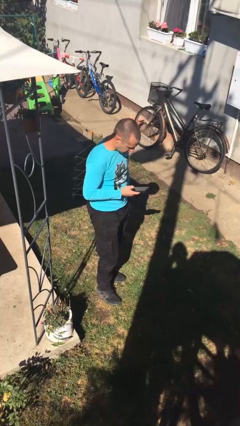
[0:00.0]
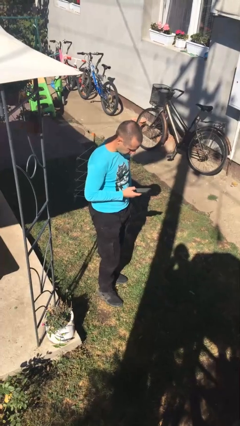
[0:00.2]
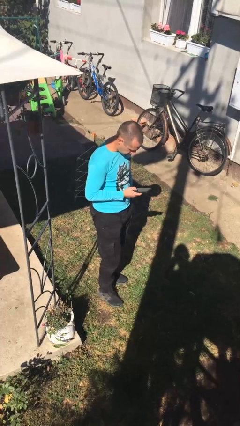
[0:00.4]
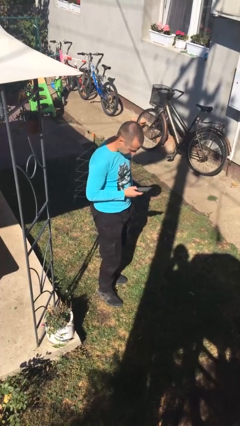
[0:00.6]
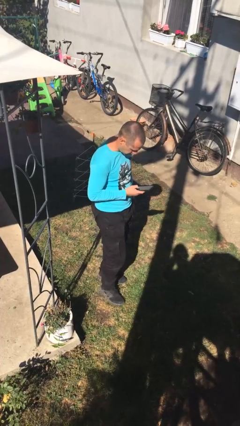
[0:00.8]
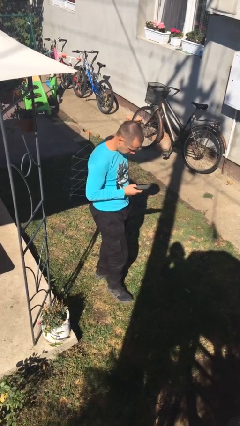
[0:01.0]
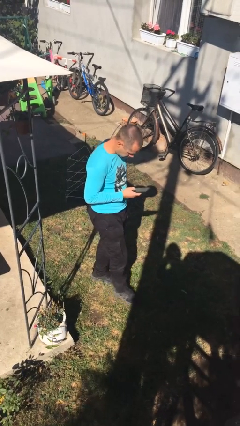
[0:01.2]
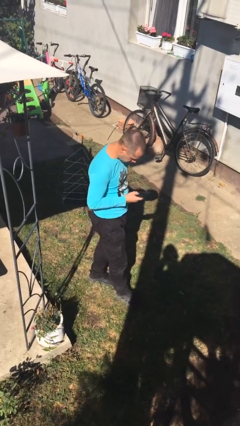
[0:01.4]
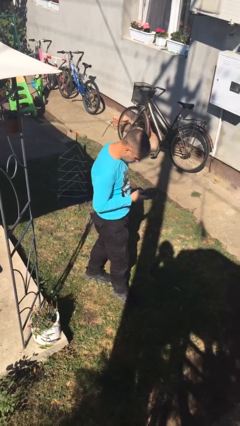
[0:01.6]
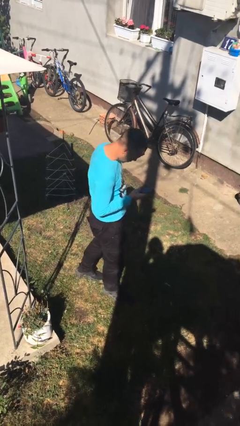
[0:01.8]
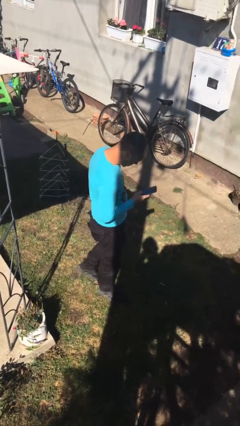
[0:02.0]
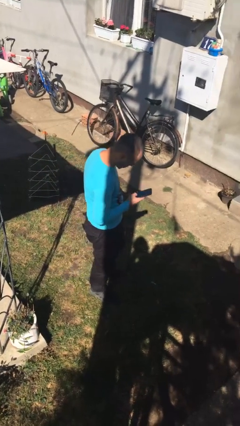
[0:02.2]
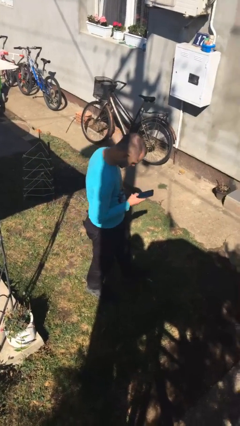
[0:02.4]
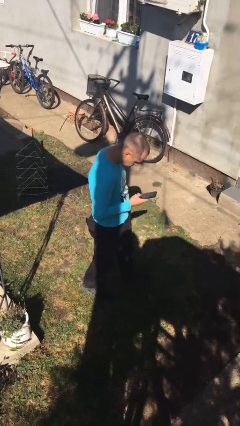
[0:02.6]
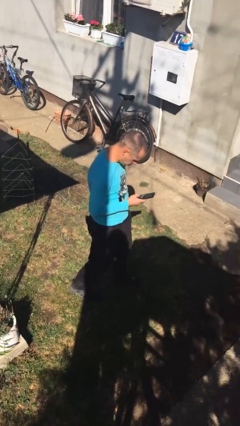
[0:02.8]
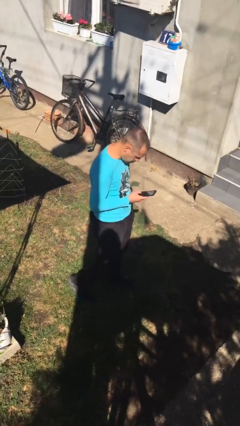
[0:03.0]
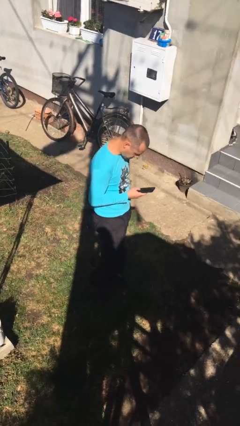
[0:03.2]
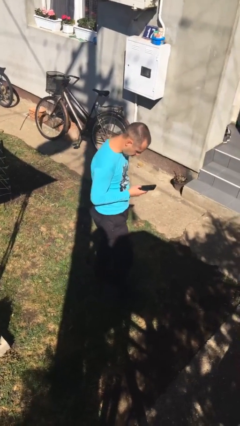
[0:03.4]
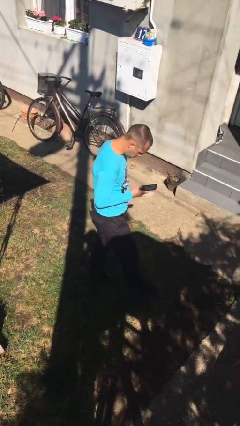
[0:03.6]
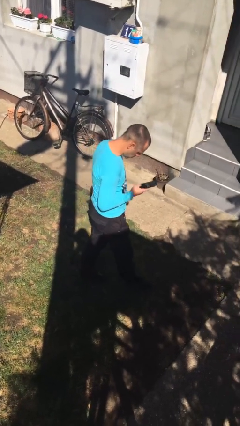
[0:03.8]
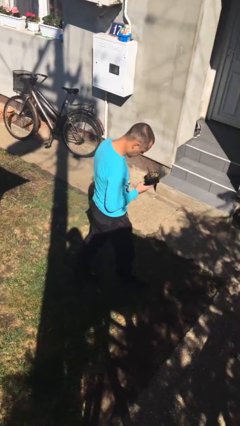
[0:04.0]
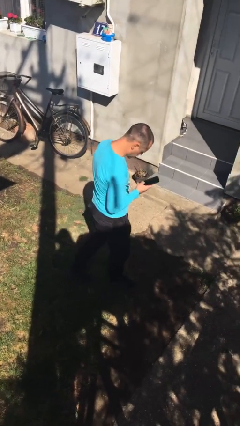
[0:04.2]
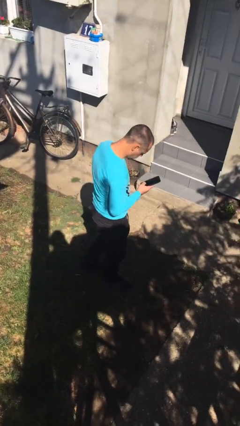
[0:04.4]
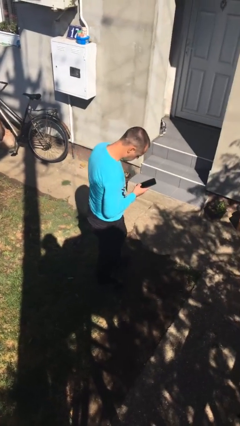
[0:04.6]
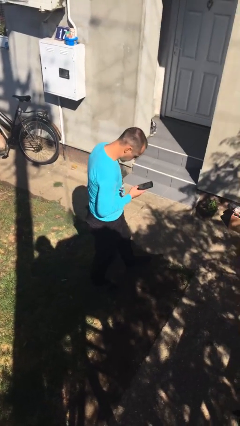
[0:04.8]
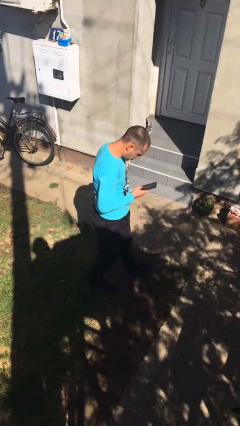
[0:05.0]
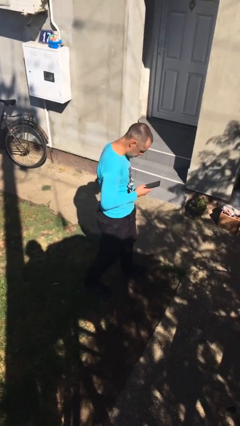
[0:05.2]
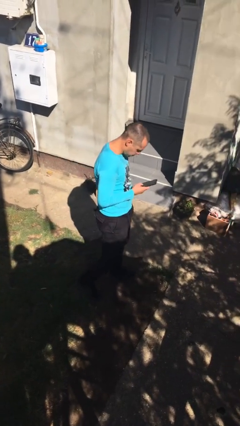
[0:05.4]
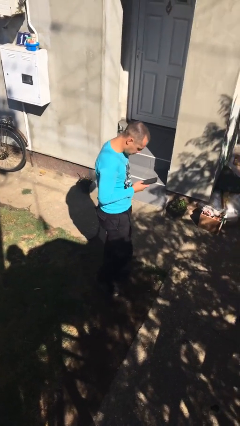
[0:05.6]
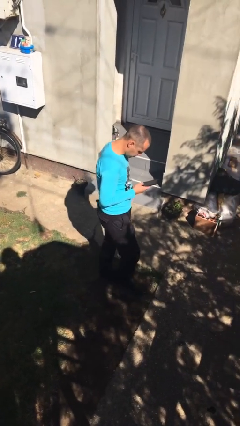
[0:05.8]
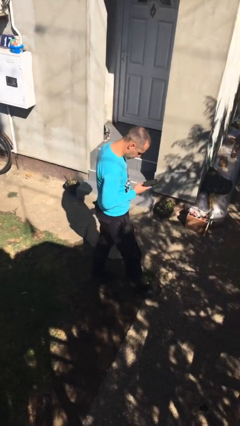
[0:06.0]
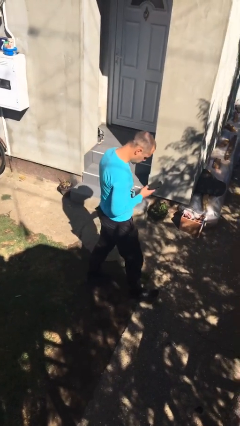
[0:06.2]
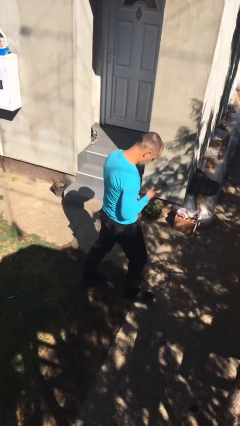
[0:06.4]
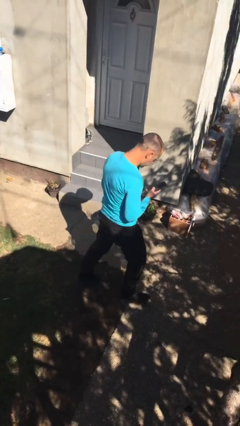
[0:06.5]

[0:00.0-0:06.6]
person texts on phone

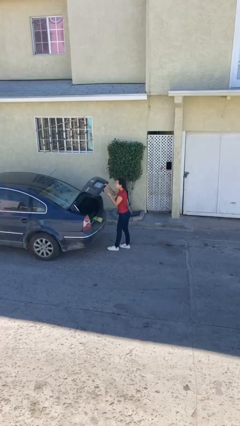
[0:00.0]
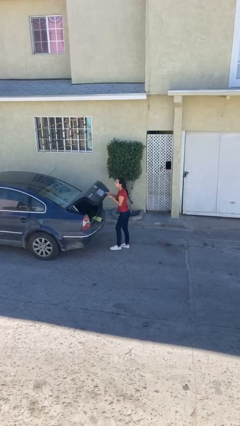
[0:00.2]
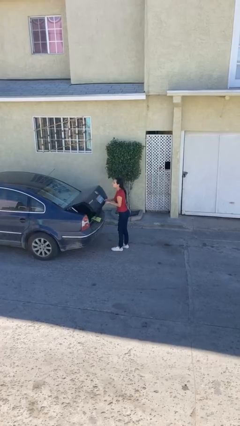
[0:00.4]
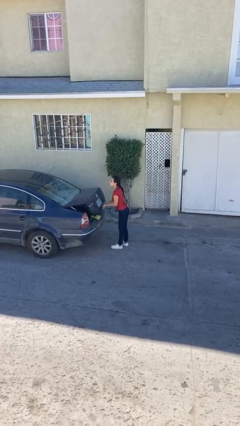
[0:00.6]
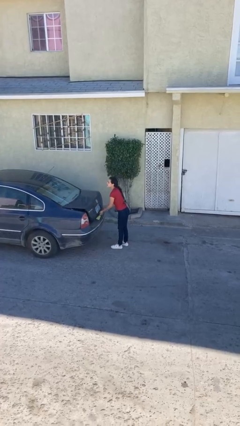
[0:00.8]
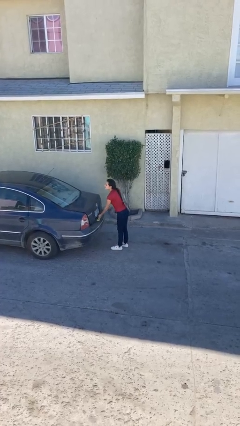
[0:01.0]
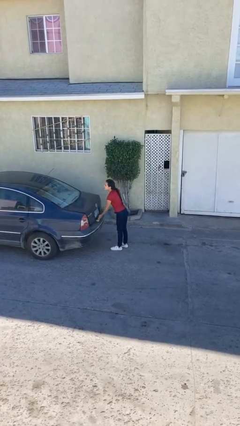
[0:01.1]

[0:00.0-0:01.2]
person closes car trunk

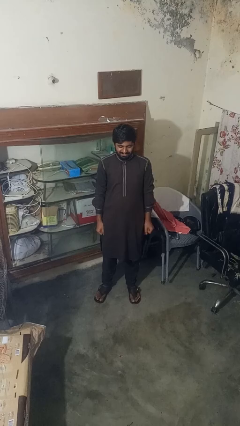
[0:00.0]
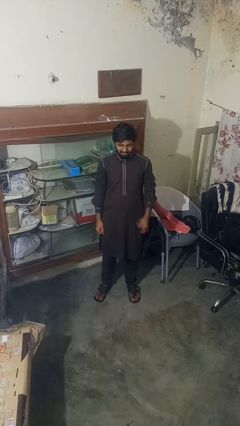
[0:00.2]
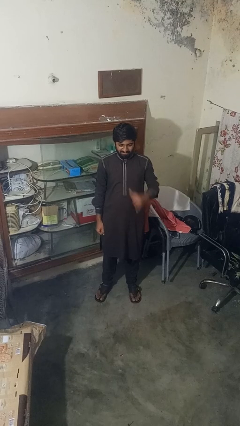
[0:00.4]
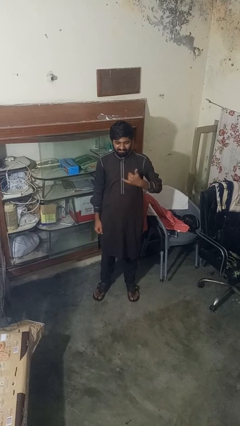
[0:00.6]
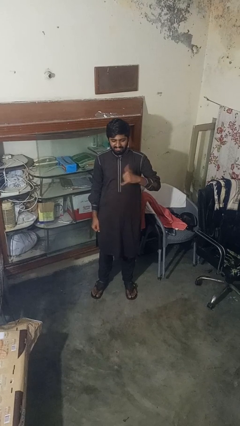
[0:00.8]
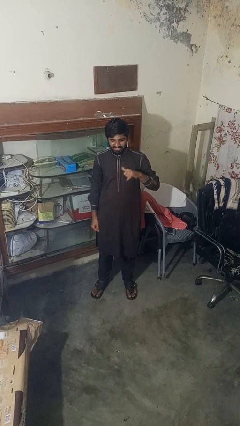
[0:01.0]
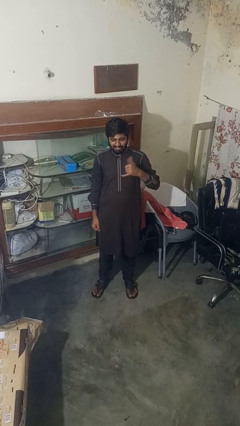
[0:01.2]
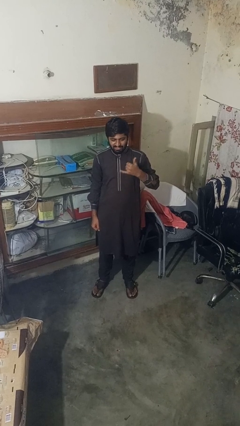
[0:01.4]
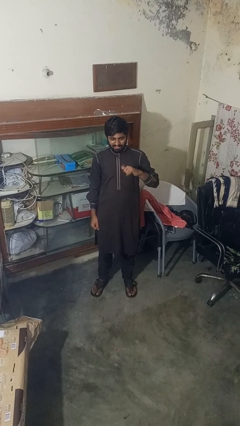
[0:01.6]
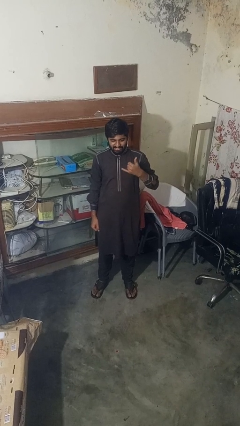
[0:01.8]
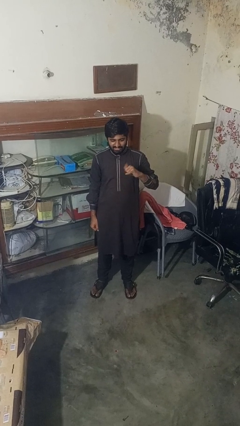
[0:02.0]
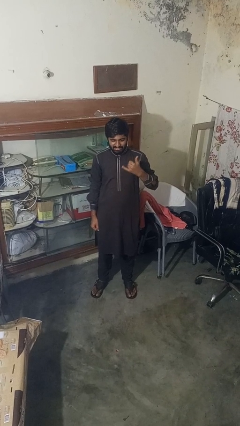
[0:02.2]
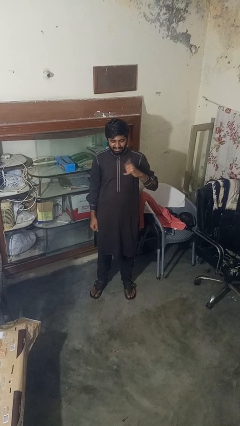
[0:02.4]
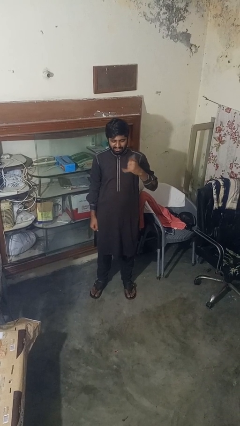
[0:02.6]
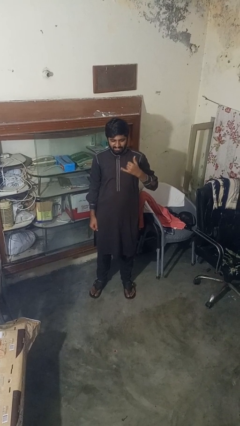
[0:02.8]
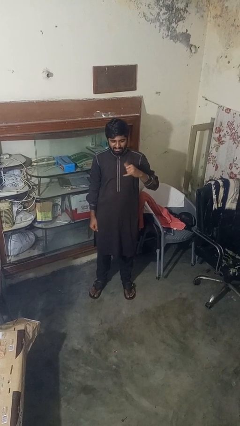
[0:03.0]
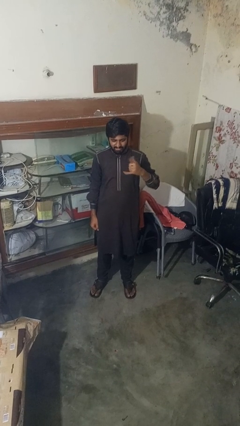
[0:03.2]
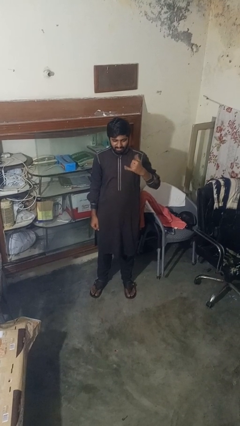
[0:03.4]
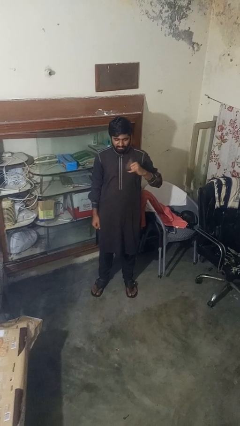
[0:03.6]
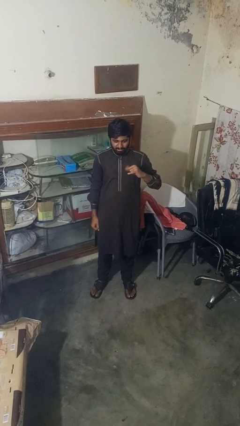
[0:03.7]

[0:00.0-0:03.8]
person gestures hang loose

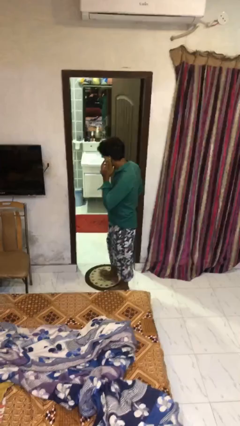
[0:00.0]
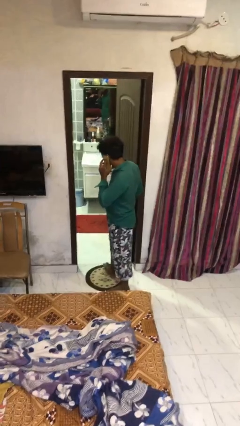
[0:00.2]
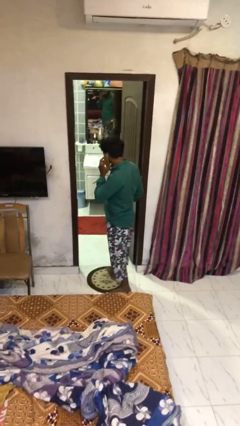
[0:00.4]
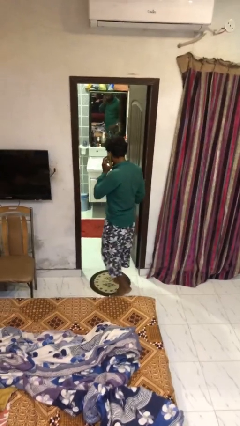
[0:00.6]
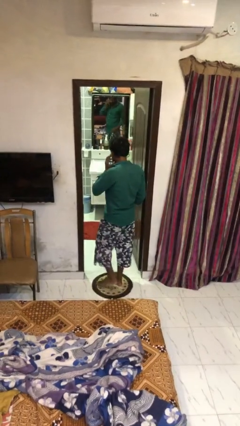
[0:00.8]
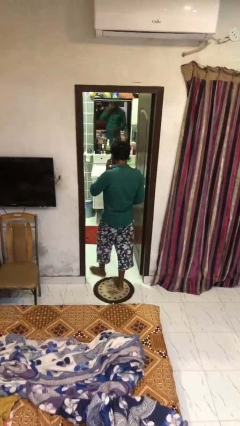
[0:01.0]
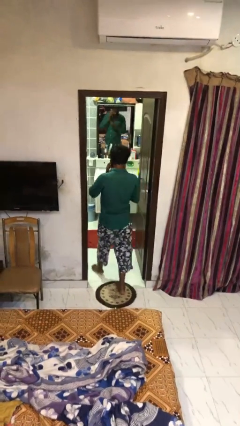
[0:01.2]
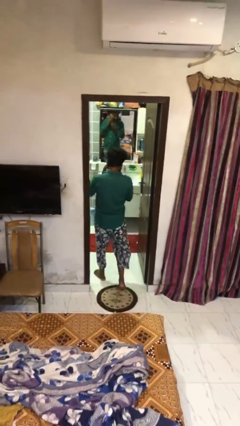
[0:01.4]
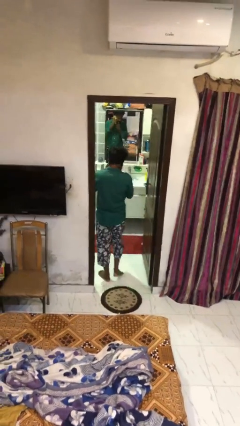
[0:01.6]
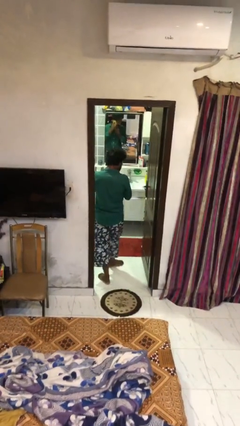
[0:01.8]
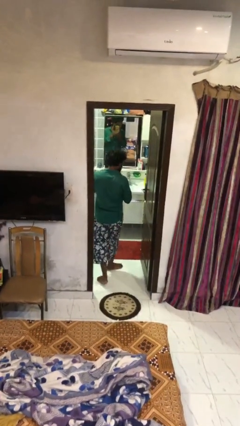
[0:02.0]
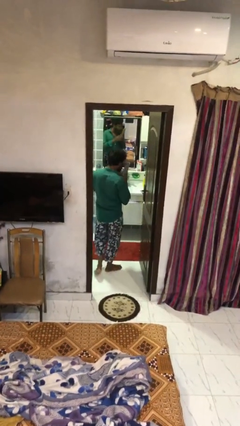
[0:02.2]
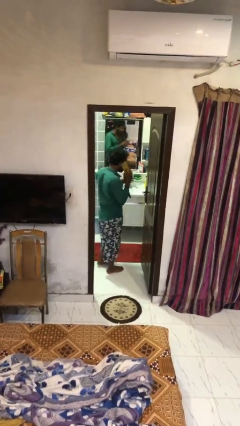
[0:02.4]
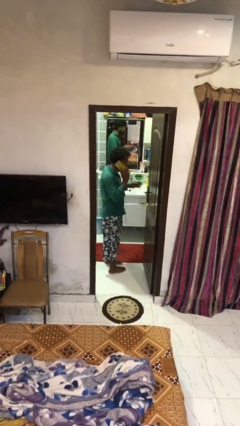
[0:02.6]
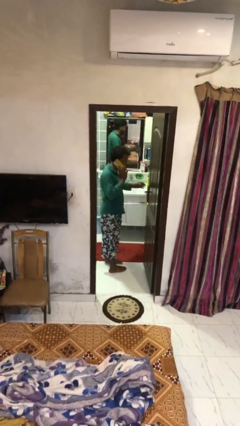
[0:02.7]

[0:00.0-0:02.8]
person exits scene through structure

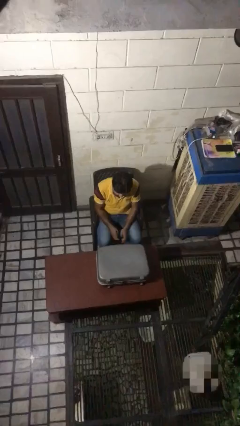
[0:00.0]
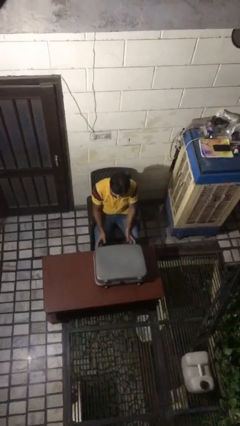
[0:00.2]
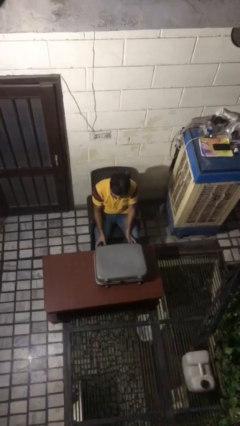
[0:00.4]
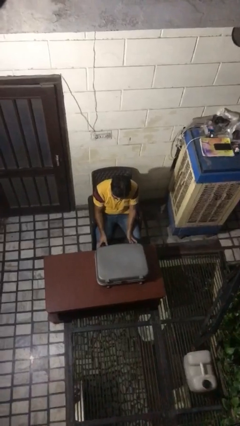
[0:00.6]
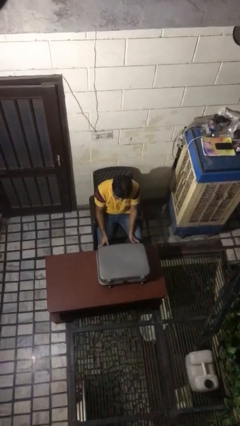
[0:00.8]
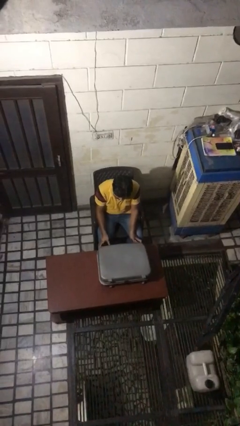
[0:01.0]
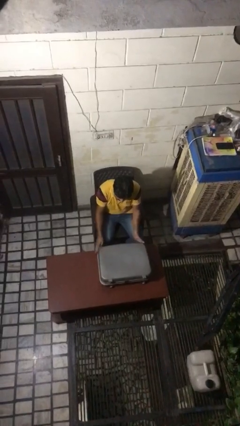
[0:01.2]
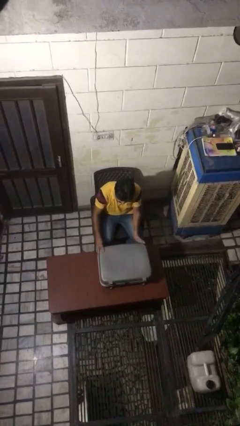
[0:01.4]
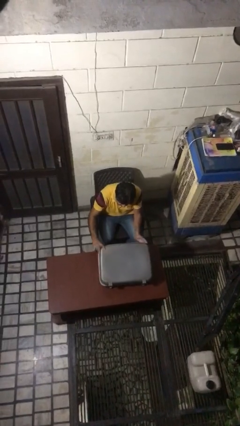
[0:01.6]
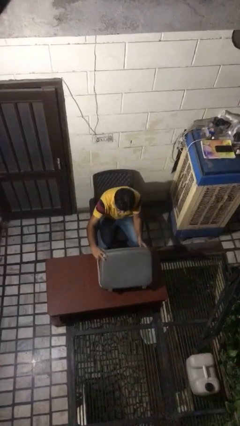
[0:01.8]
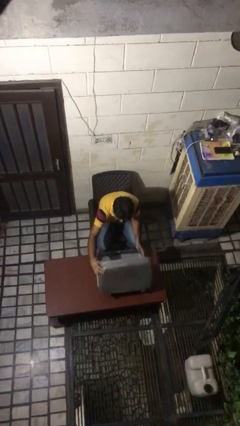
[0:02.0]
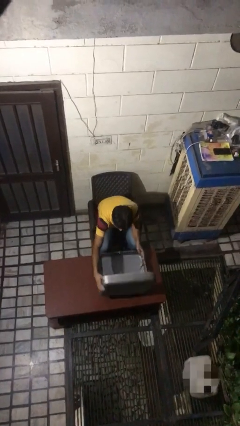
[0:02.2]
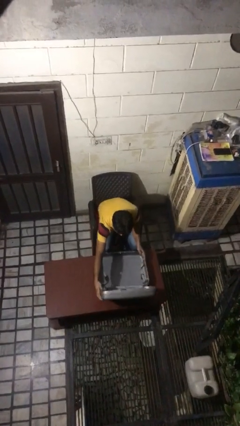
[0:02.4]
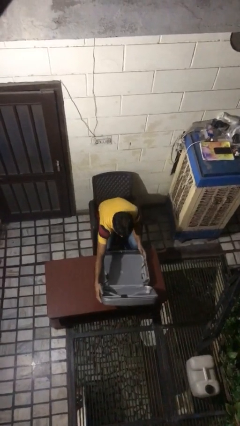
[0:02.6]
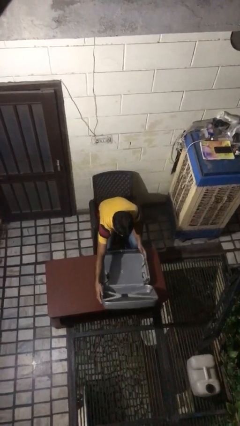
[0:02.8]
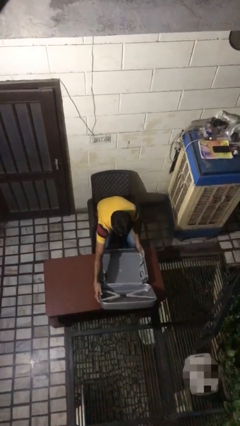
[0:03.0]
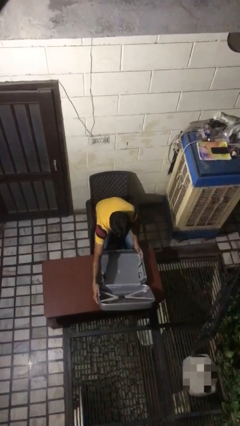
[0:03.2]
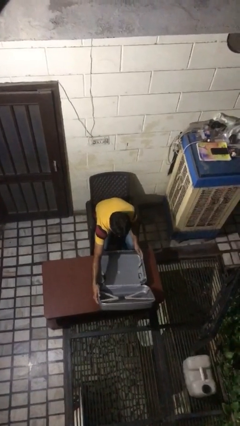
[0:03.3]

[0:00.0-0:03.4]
person opens suitcase
